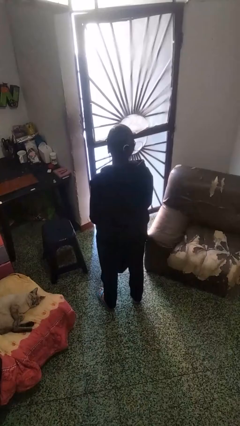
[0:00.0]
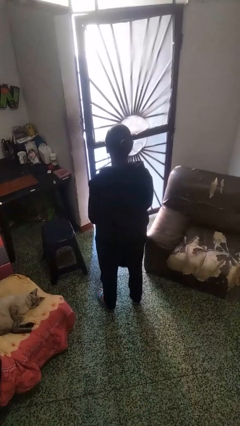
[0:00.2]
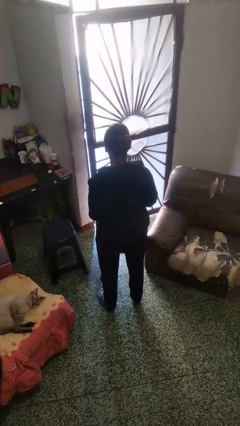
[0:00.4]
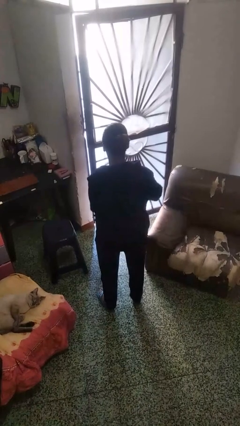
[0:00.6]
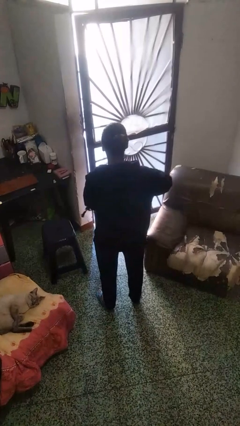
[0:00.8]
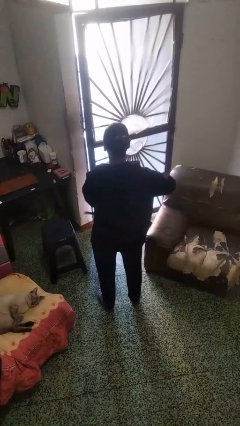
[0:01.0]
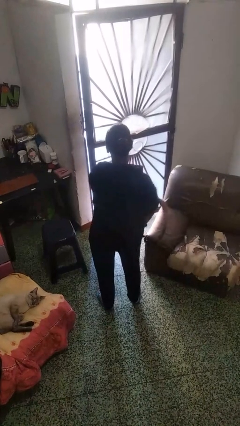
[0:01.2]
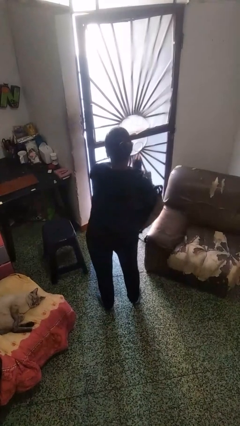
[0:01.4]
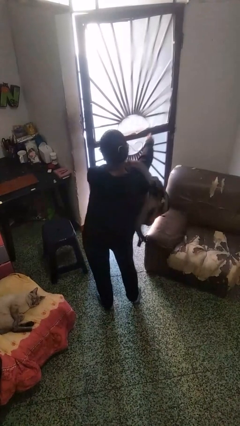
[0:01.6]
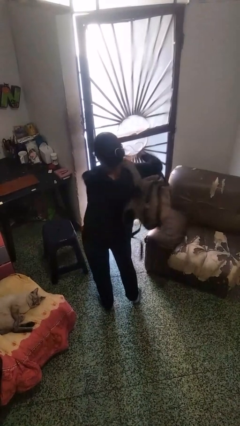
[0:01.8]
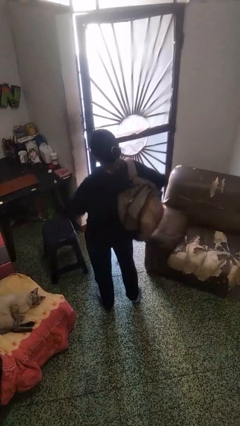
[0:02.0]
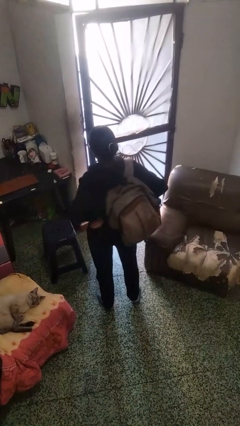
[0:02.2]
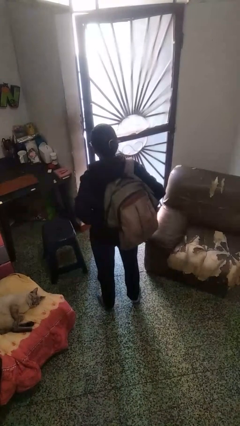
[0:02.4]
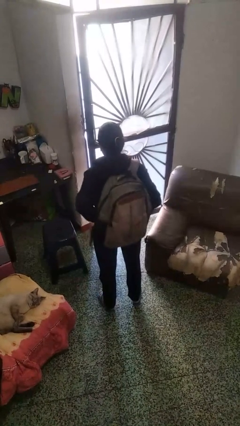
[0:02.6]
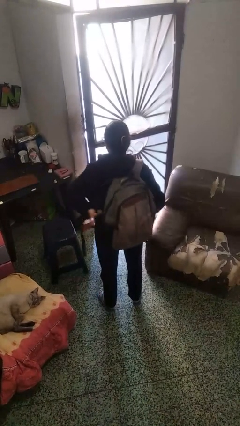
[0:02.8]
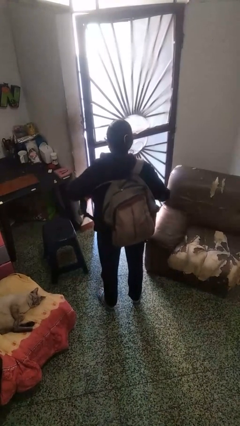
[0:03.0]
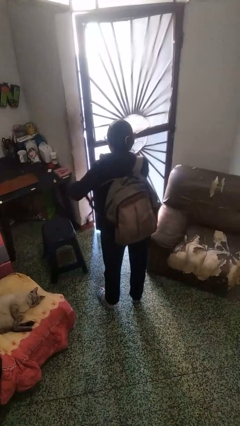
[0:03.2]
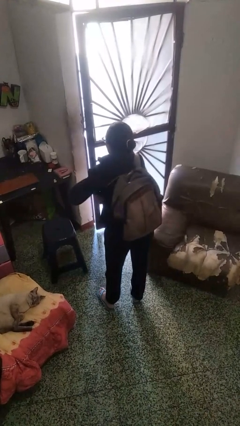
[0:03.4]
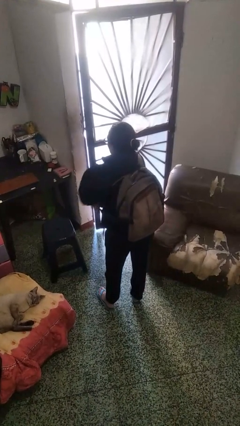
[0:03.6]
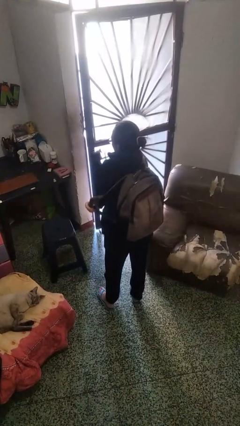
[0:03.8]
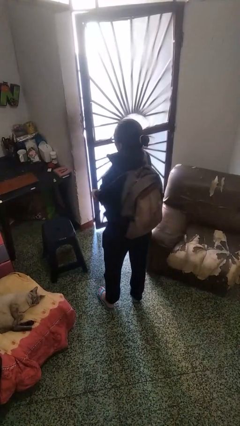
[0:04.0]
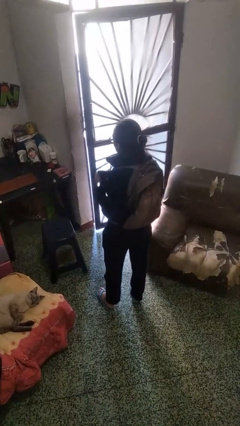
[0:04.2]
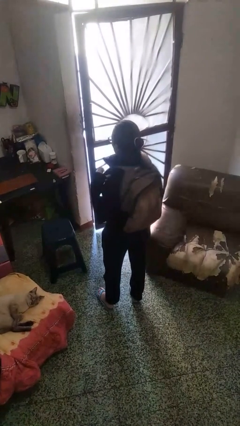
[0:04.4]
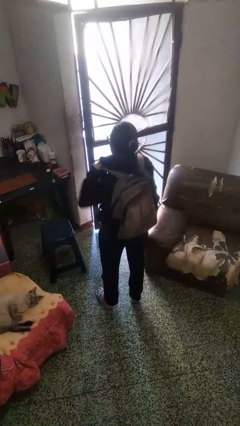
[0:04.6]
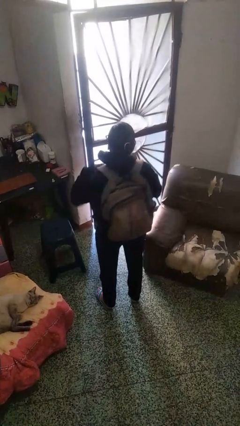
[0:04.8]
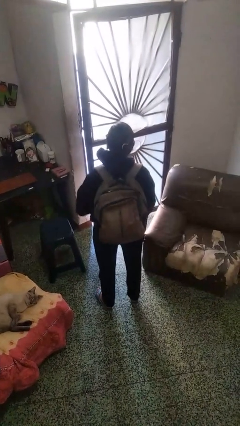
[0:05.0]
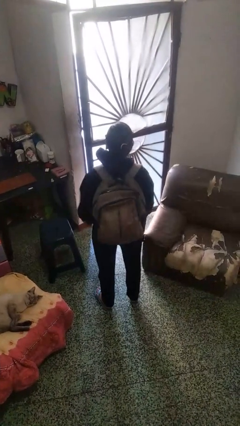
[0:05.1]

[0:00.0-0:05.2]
person puts on backpack

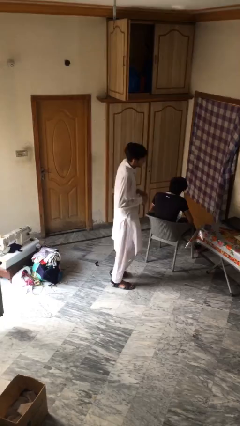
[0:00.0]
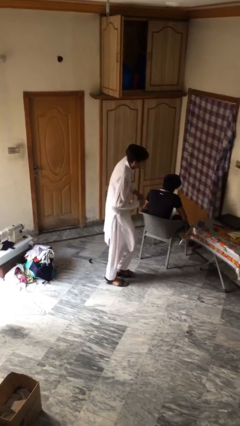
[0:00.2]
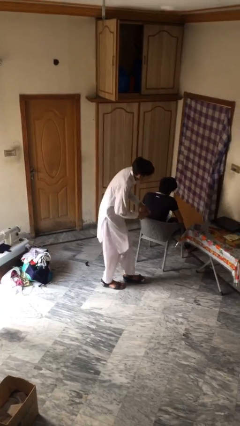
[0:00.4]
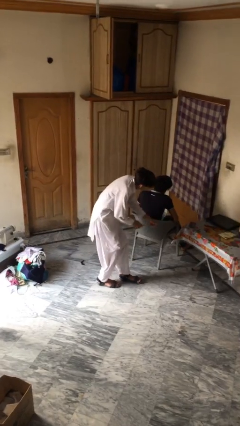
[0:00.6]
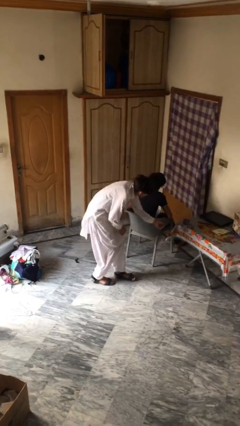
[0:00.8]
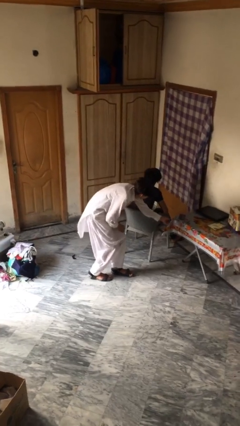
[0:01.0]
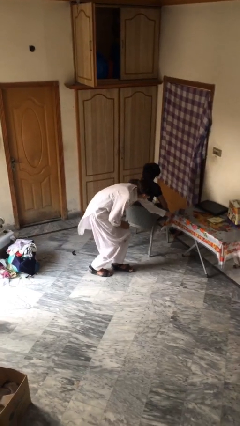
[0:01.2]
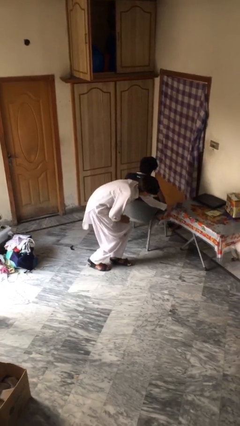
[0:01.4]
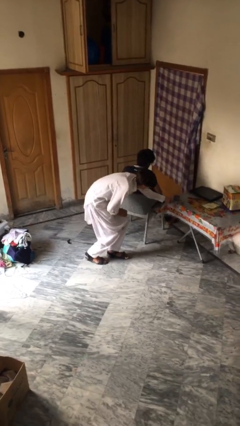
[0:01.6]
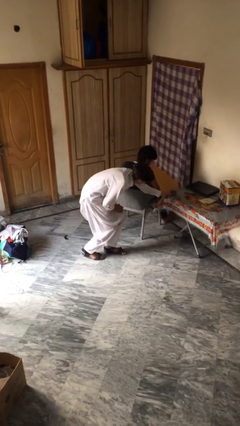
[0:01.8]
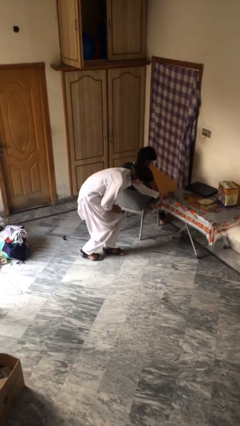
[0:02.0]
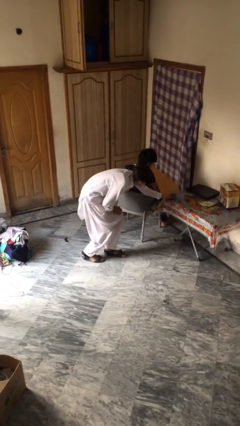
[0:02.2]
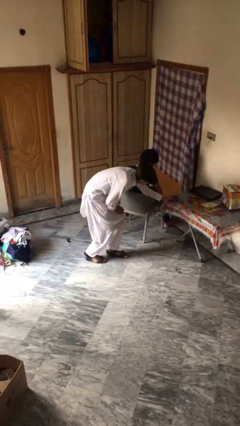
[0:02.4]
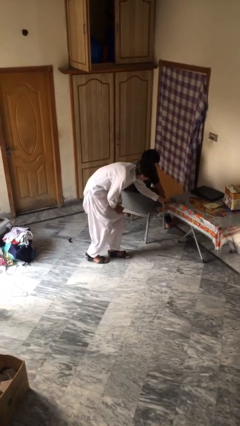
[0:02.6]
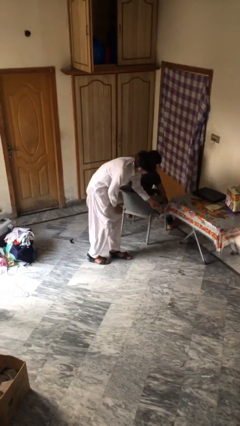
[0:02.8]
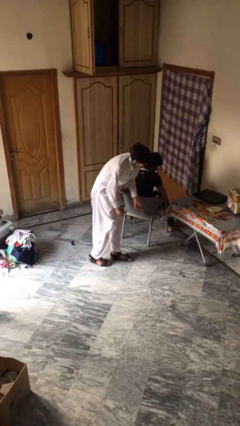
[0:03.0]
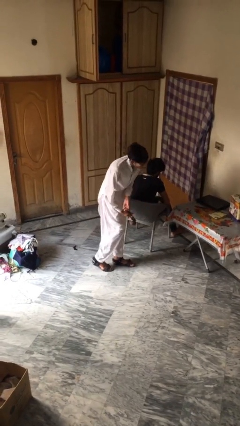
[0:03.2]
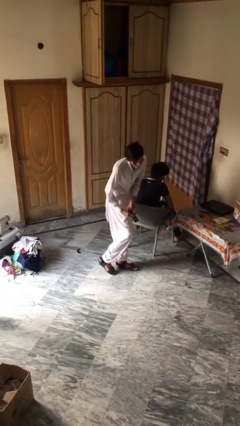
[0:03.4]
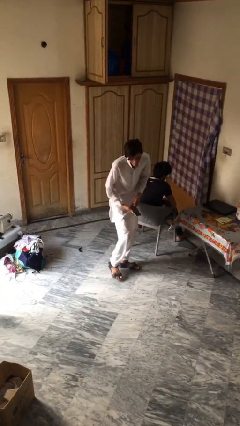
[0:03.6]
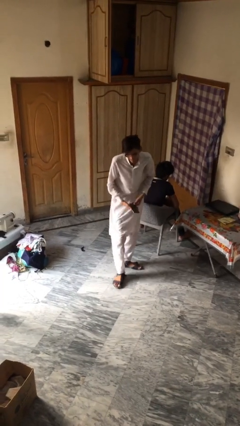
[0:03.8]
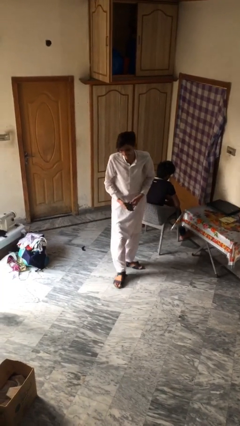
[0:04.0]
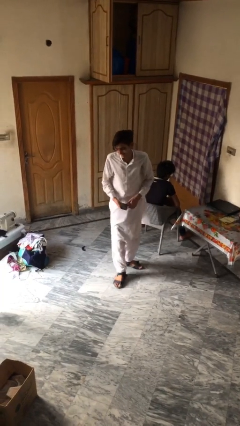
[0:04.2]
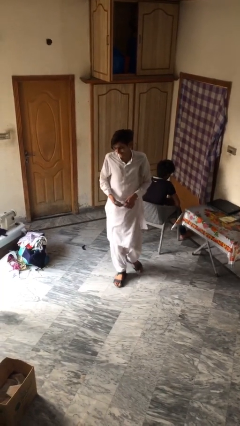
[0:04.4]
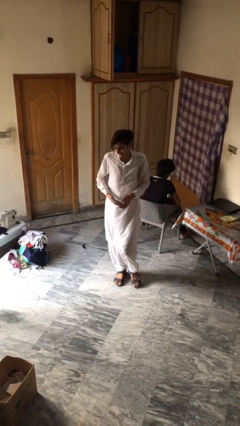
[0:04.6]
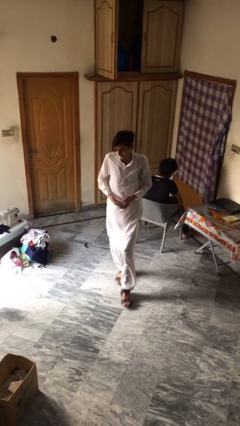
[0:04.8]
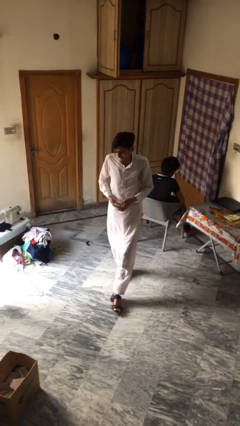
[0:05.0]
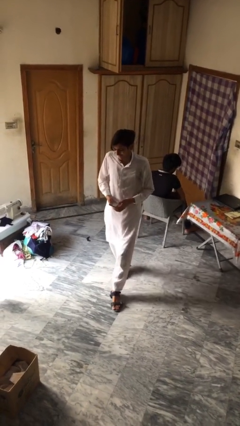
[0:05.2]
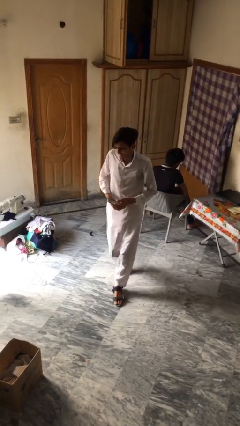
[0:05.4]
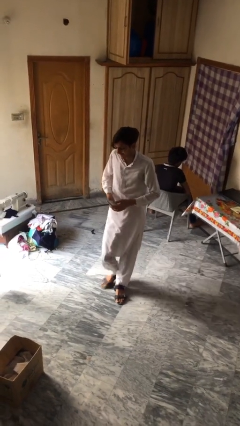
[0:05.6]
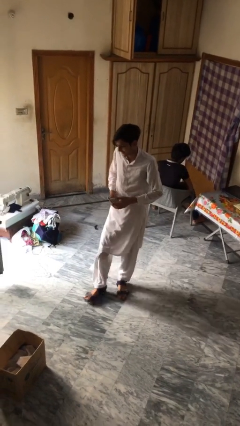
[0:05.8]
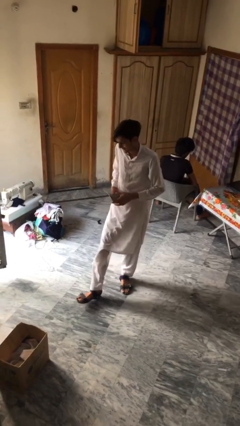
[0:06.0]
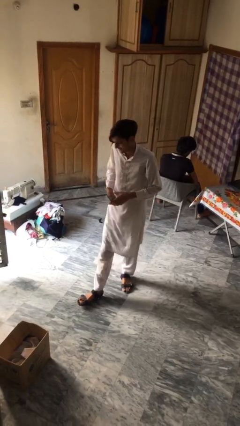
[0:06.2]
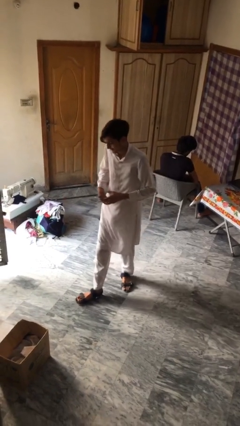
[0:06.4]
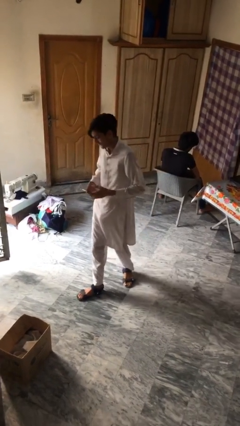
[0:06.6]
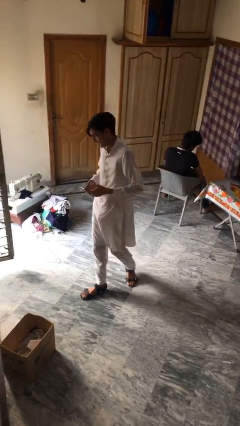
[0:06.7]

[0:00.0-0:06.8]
person steals object from person

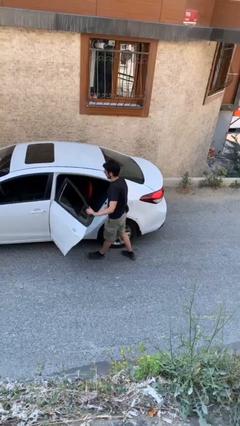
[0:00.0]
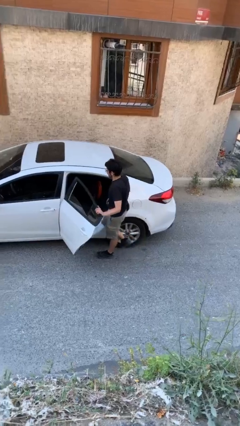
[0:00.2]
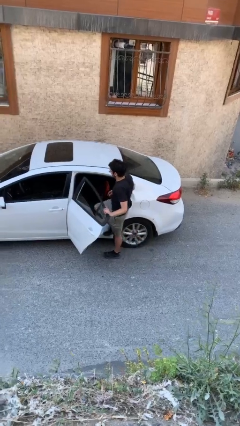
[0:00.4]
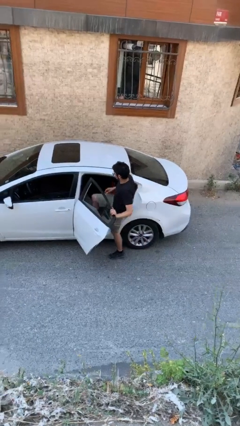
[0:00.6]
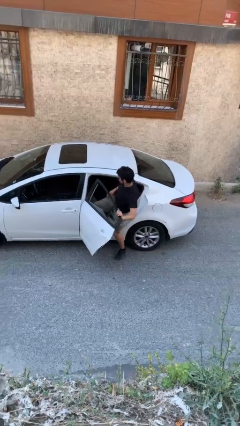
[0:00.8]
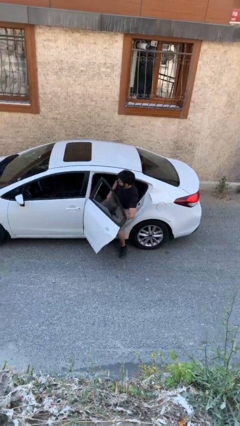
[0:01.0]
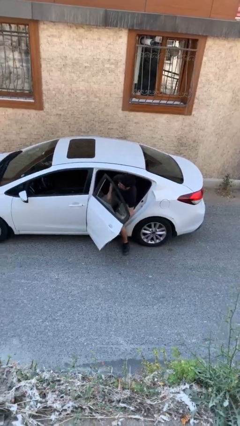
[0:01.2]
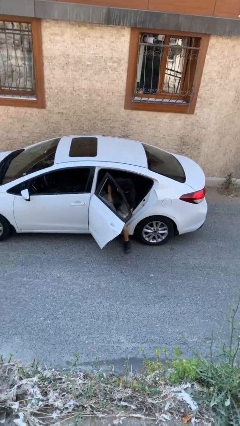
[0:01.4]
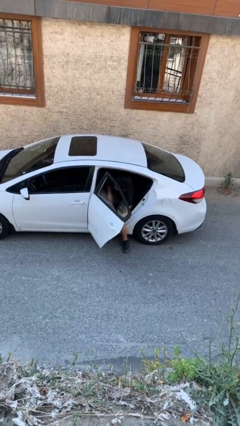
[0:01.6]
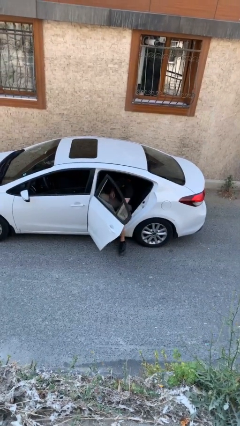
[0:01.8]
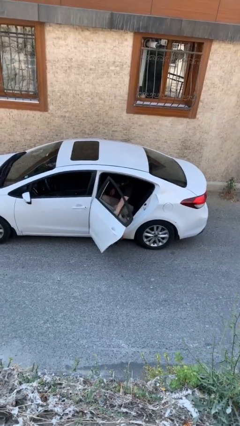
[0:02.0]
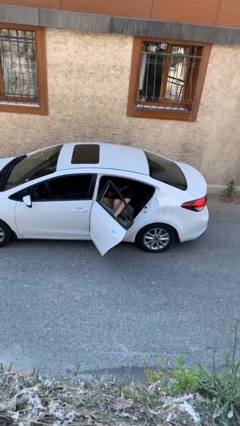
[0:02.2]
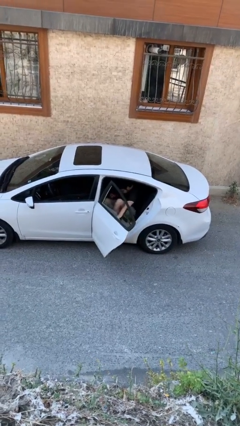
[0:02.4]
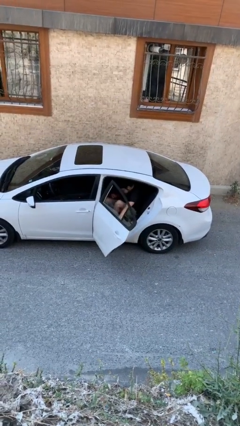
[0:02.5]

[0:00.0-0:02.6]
person enters car

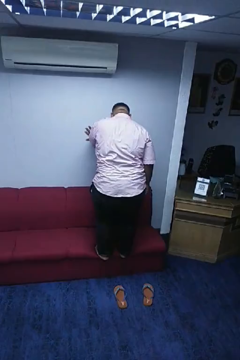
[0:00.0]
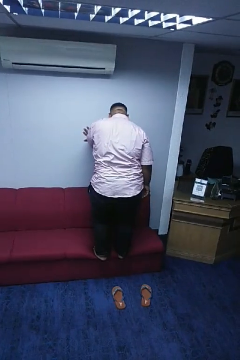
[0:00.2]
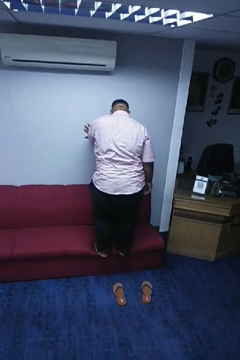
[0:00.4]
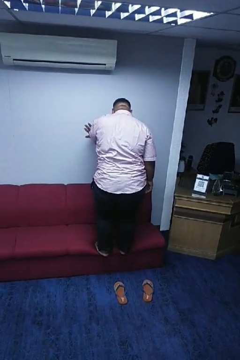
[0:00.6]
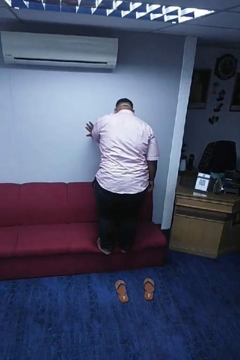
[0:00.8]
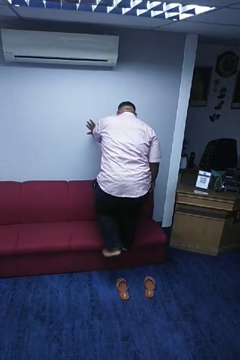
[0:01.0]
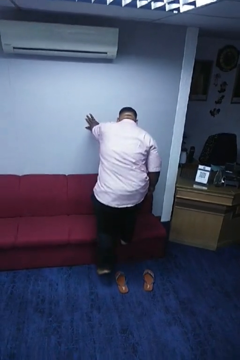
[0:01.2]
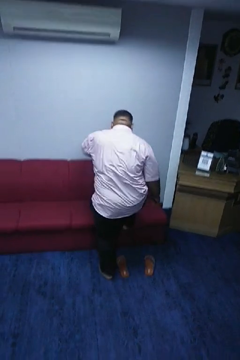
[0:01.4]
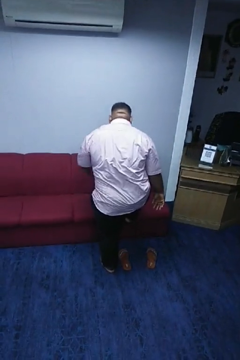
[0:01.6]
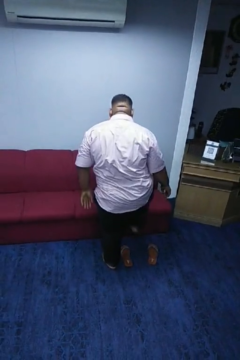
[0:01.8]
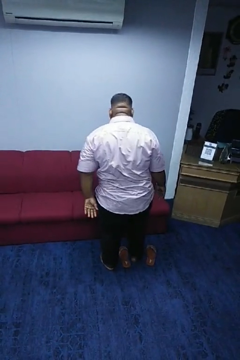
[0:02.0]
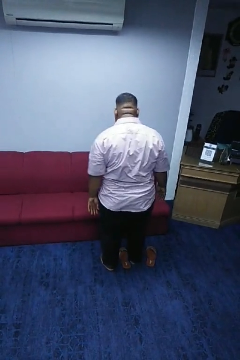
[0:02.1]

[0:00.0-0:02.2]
person climbs off couch

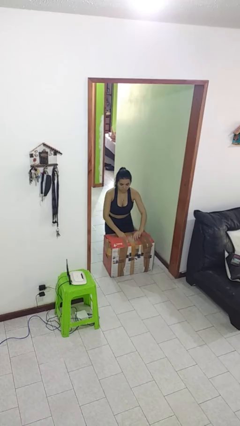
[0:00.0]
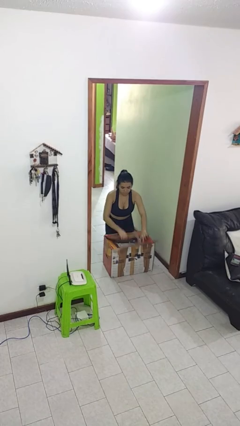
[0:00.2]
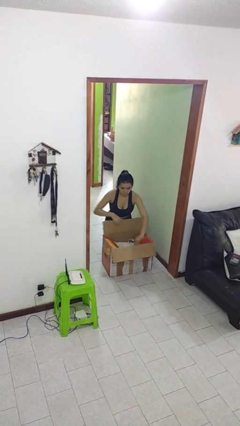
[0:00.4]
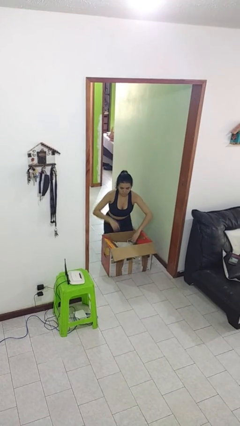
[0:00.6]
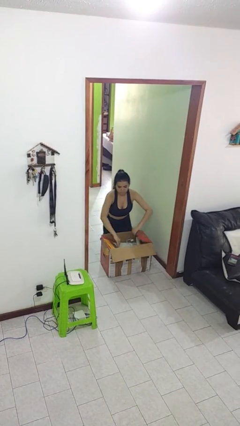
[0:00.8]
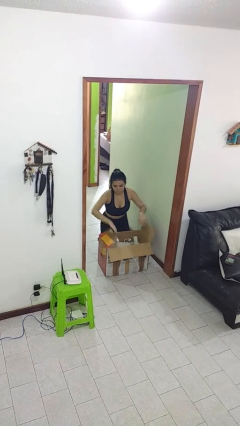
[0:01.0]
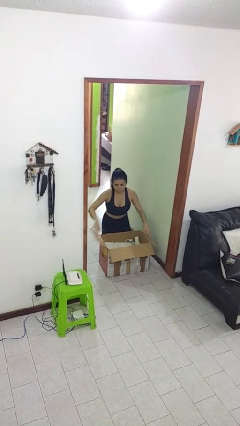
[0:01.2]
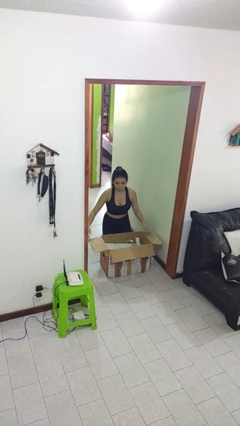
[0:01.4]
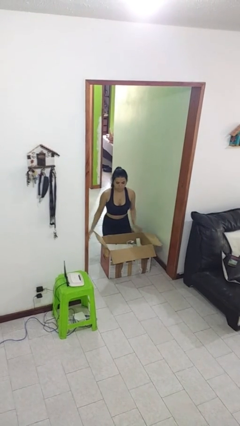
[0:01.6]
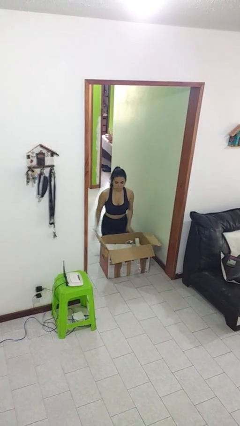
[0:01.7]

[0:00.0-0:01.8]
person opens box
